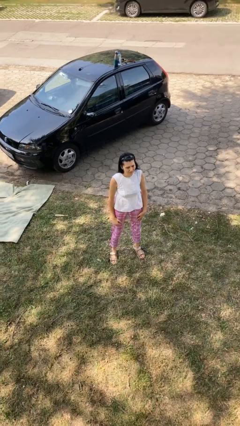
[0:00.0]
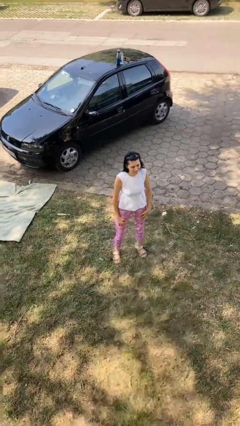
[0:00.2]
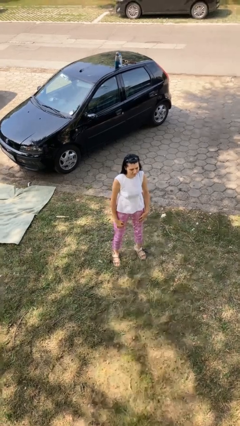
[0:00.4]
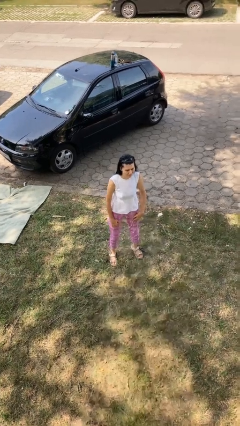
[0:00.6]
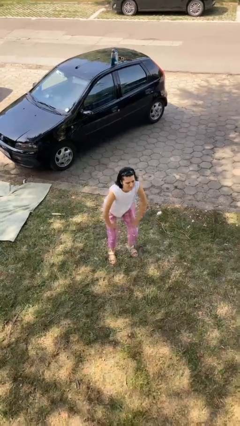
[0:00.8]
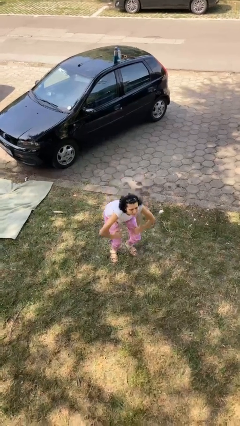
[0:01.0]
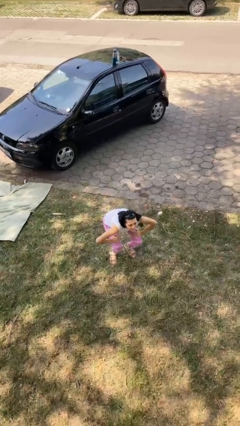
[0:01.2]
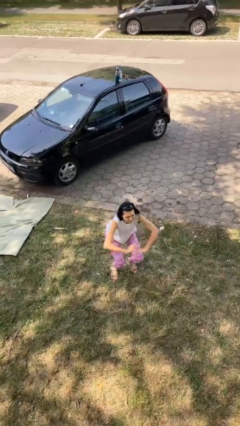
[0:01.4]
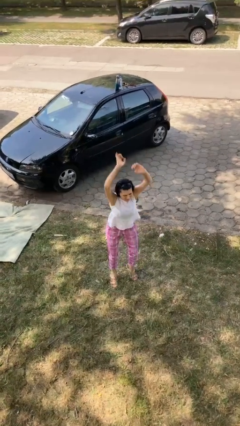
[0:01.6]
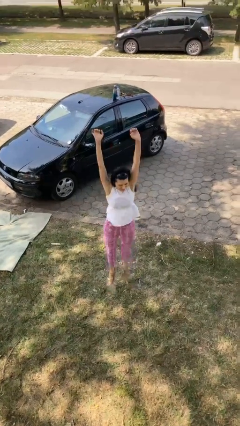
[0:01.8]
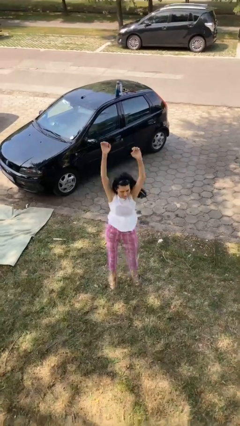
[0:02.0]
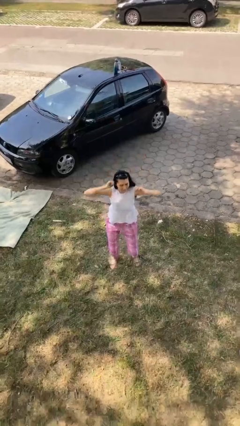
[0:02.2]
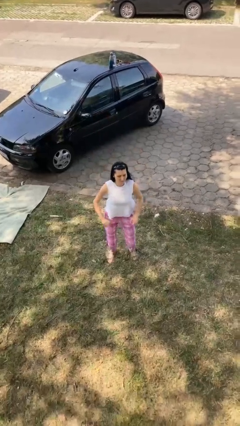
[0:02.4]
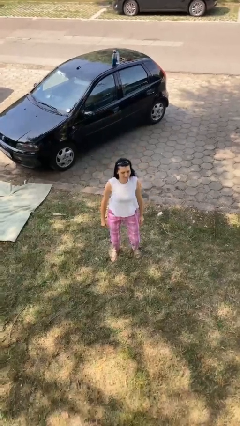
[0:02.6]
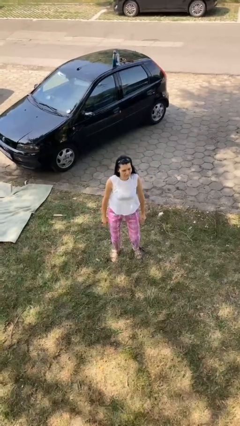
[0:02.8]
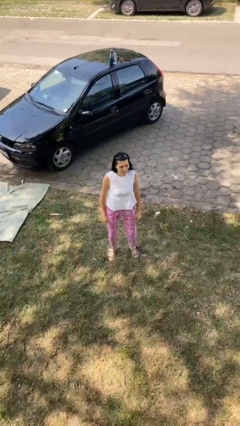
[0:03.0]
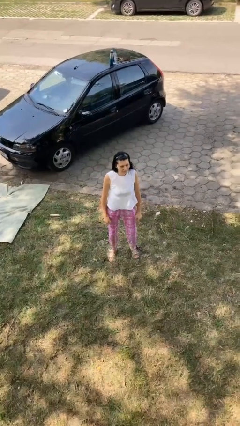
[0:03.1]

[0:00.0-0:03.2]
person jumps

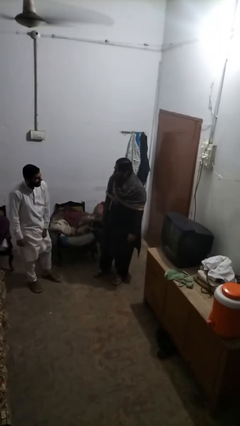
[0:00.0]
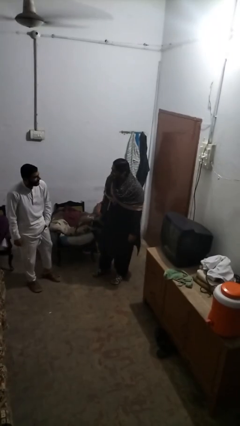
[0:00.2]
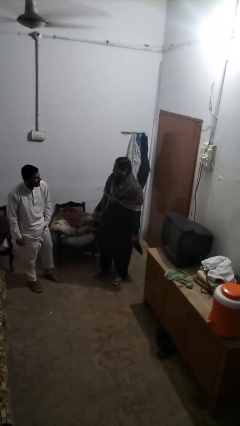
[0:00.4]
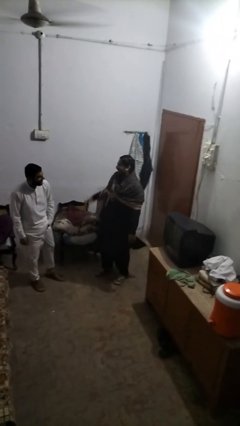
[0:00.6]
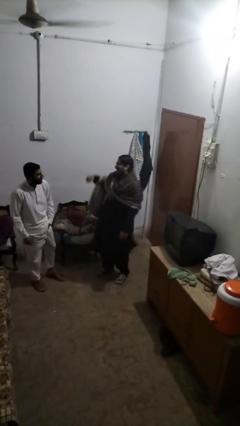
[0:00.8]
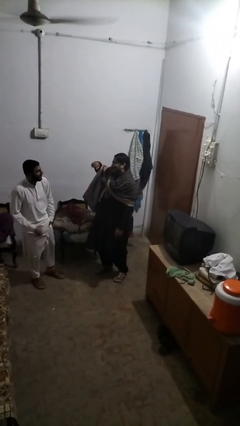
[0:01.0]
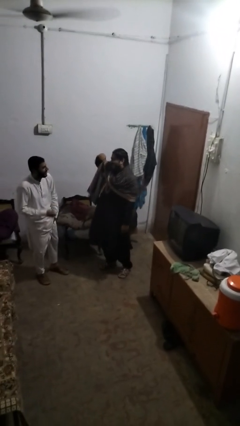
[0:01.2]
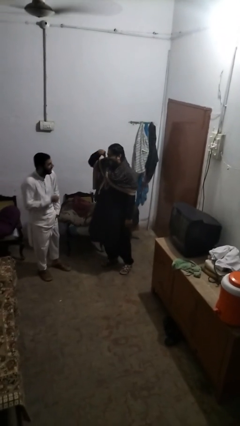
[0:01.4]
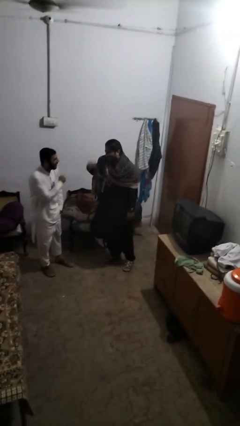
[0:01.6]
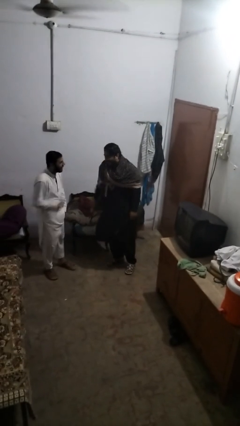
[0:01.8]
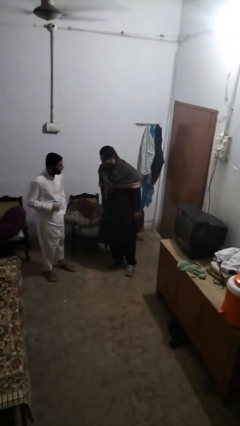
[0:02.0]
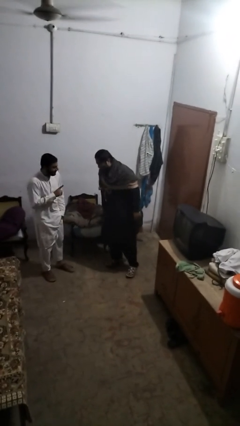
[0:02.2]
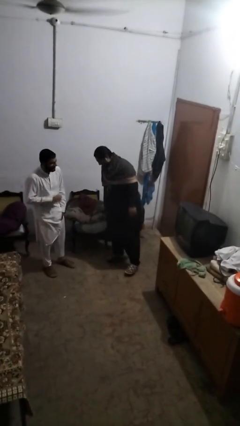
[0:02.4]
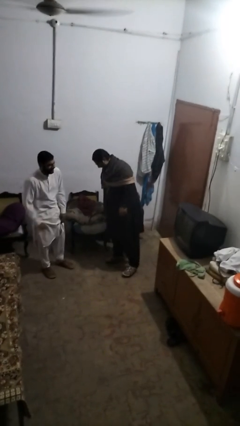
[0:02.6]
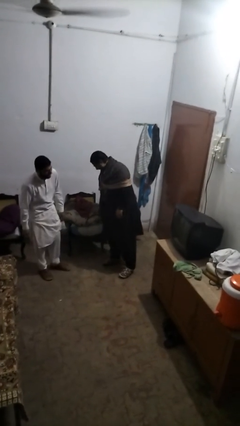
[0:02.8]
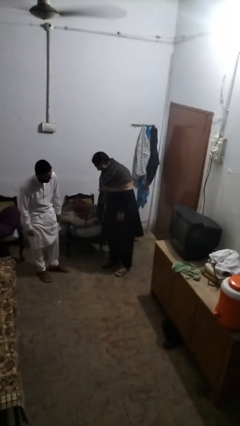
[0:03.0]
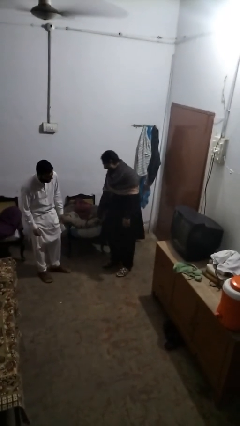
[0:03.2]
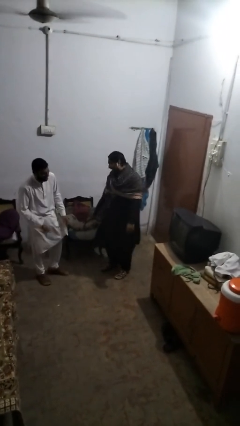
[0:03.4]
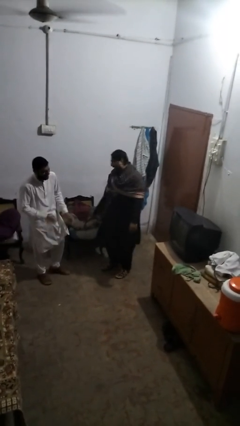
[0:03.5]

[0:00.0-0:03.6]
person laughs with person

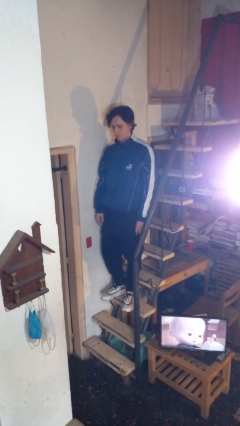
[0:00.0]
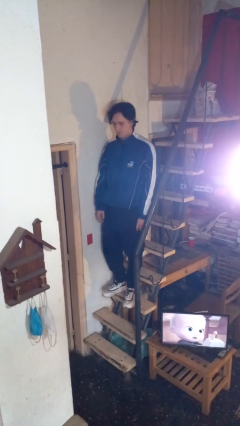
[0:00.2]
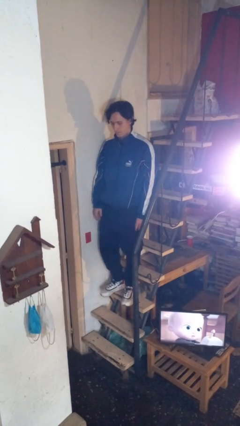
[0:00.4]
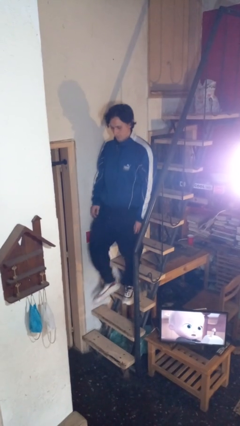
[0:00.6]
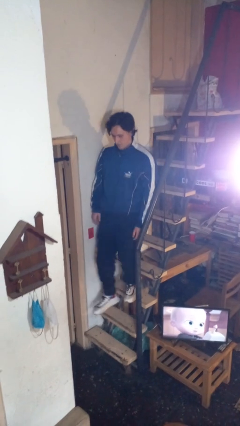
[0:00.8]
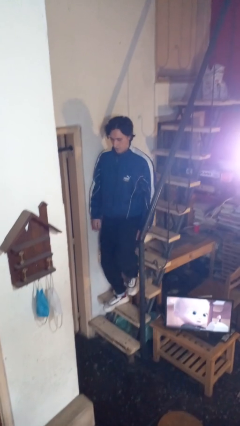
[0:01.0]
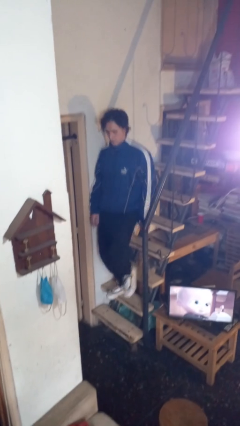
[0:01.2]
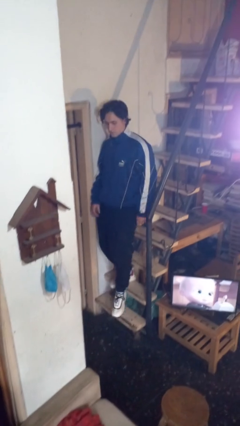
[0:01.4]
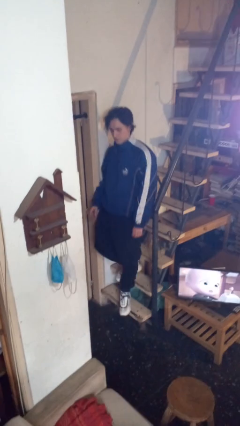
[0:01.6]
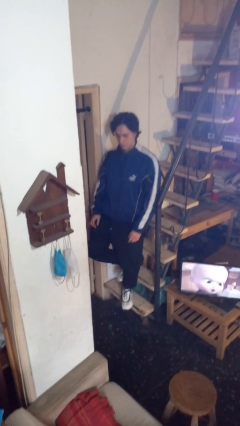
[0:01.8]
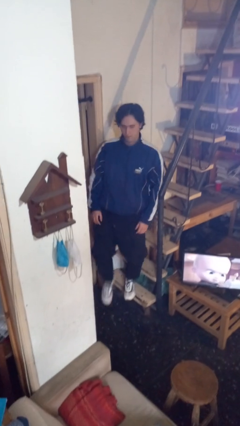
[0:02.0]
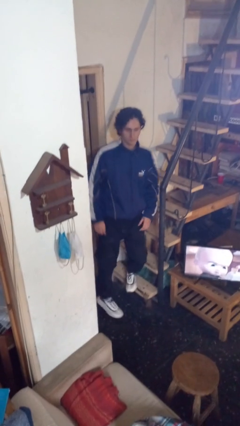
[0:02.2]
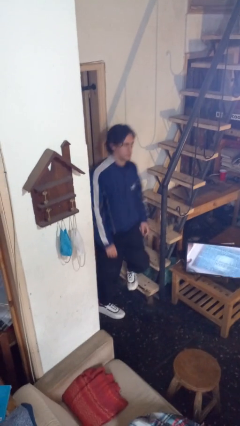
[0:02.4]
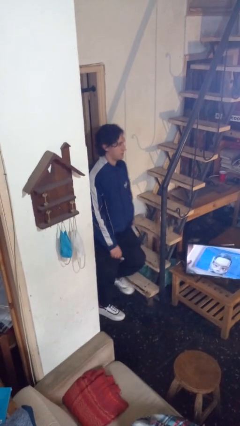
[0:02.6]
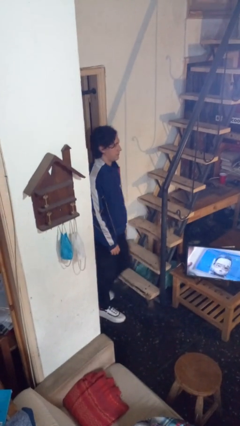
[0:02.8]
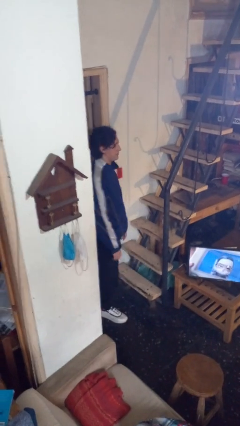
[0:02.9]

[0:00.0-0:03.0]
person climbs down stairs

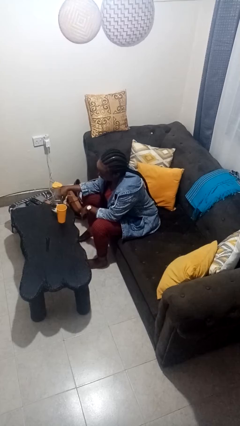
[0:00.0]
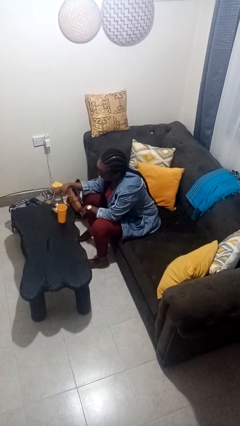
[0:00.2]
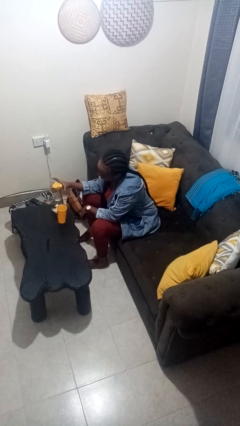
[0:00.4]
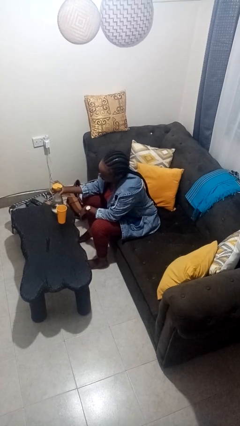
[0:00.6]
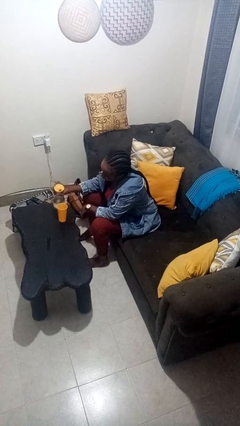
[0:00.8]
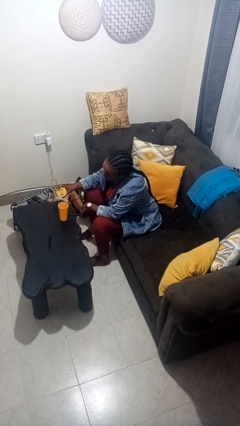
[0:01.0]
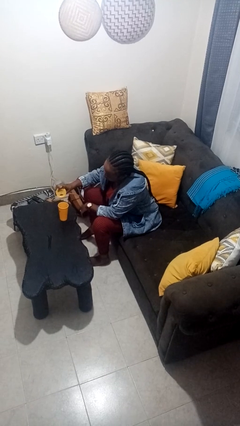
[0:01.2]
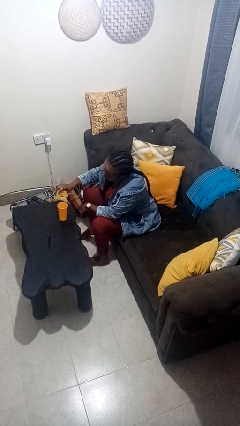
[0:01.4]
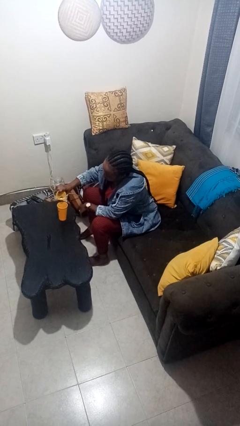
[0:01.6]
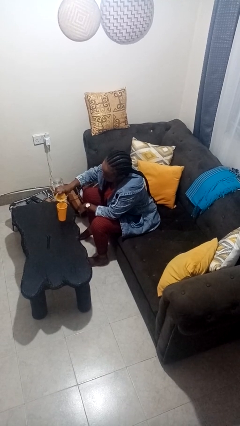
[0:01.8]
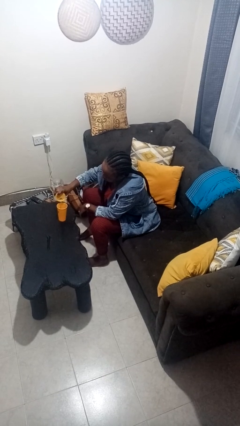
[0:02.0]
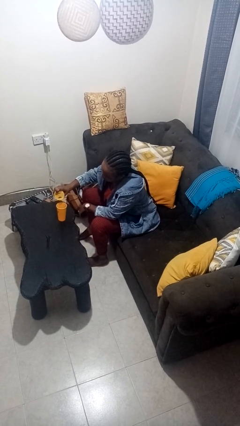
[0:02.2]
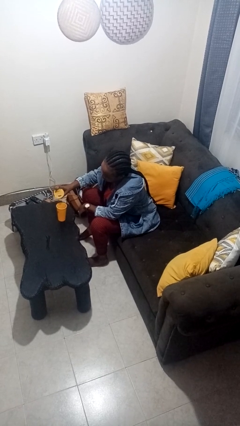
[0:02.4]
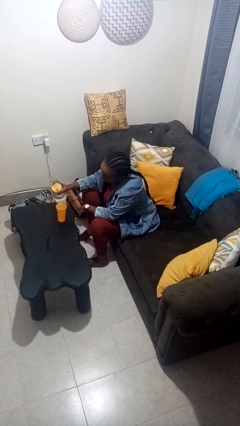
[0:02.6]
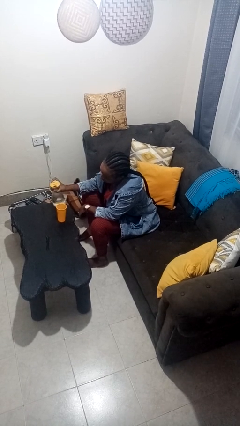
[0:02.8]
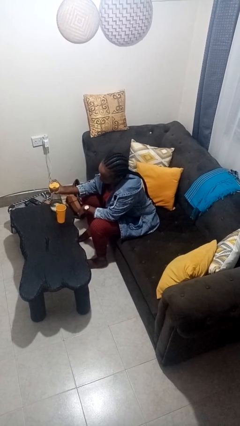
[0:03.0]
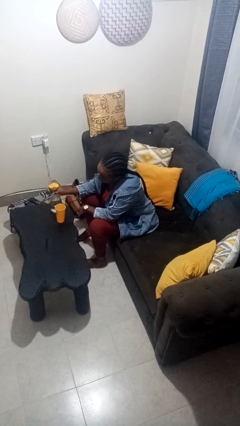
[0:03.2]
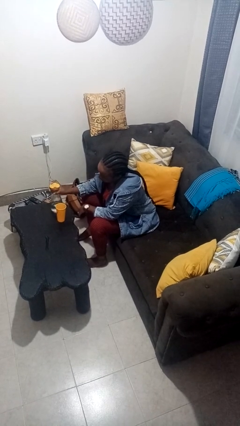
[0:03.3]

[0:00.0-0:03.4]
person pours liquid into cup

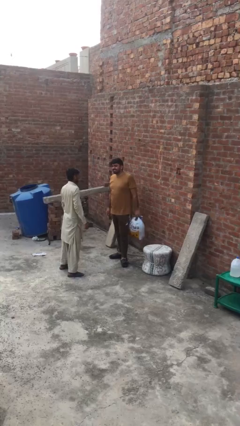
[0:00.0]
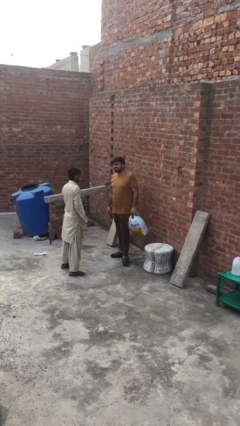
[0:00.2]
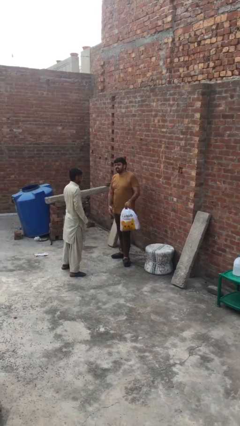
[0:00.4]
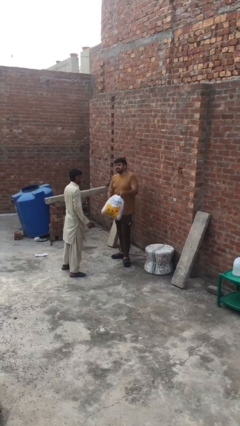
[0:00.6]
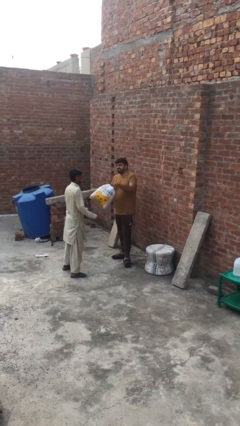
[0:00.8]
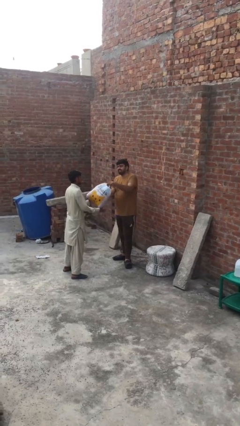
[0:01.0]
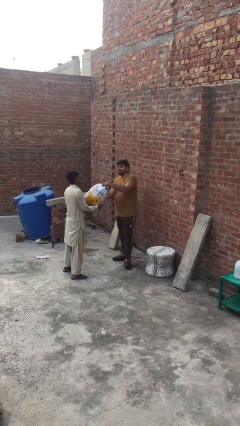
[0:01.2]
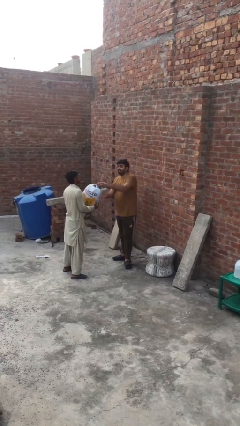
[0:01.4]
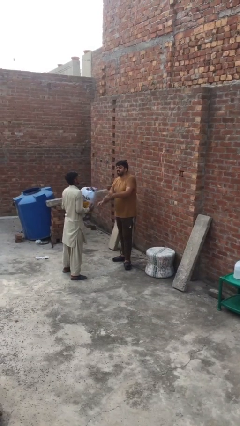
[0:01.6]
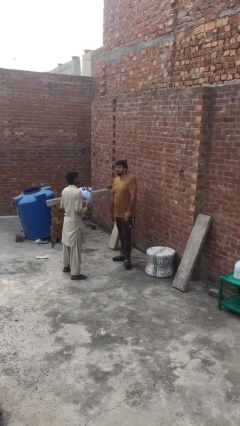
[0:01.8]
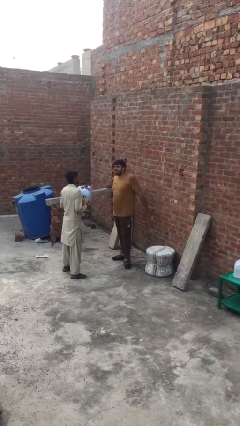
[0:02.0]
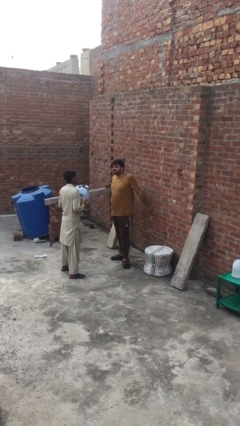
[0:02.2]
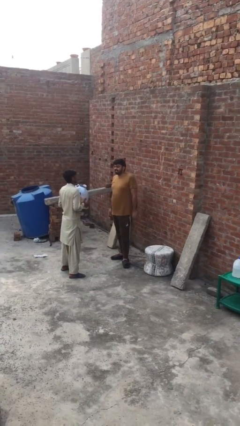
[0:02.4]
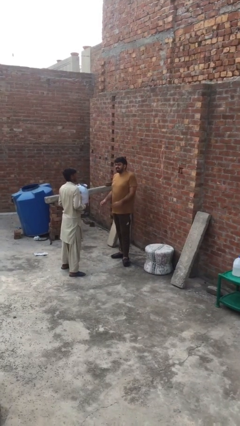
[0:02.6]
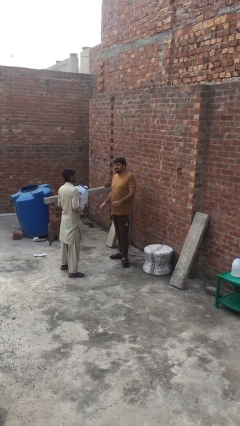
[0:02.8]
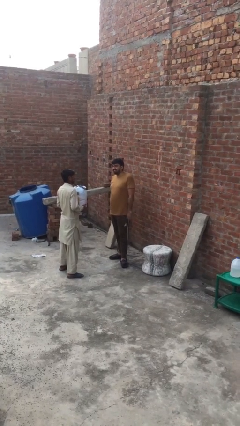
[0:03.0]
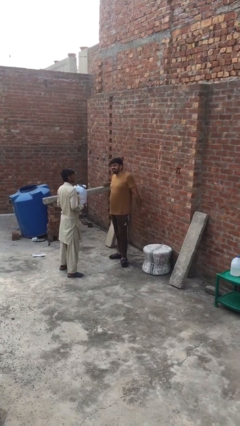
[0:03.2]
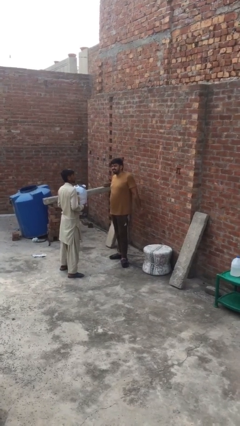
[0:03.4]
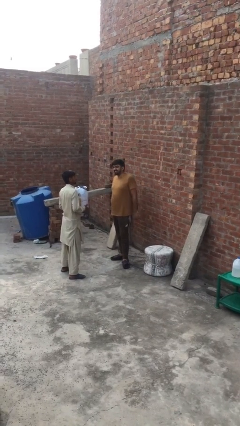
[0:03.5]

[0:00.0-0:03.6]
person transfers object to person

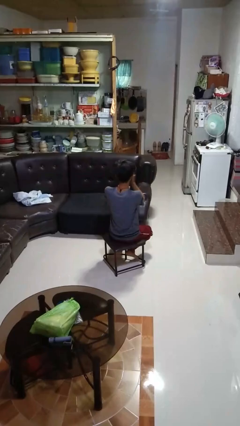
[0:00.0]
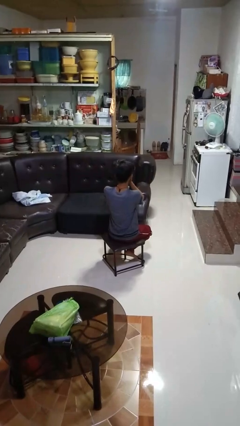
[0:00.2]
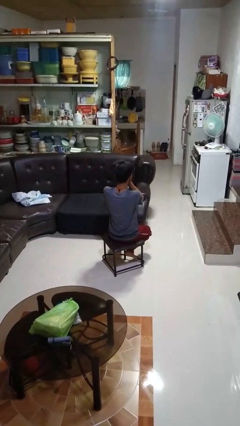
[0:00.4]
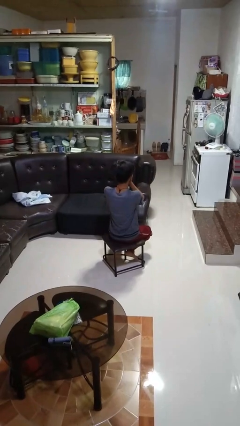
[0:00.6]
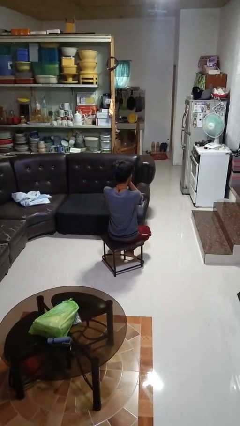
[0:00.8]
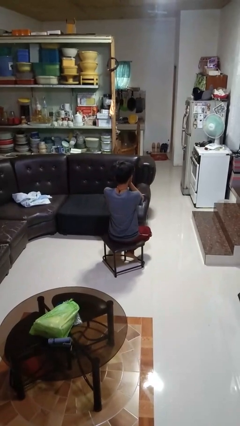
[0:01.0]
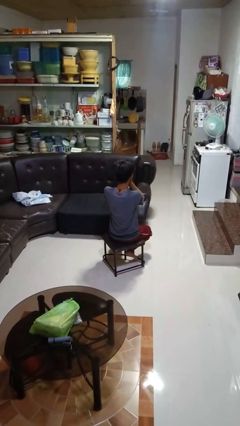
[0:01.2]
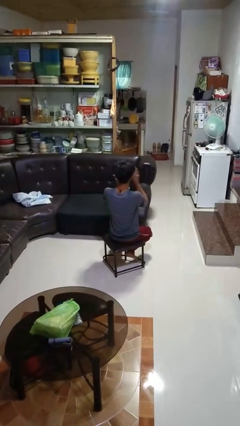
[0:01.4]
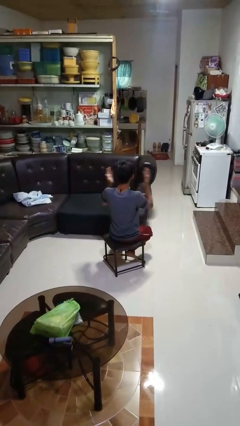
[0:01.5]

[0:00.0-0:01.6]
person covers face with hands
